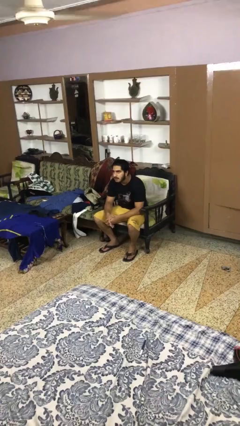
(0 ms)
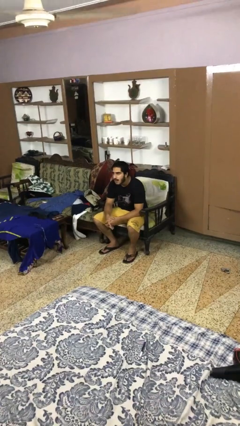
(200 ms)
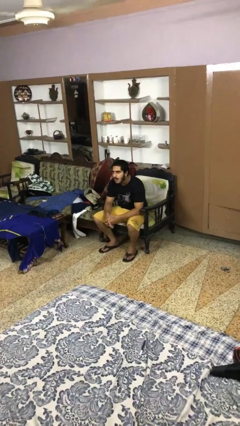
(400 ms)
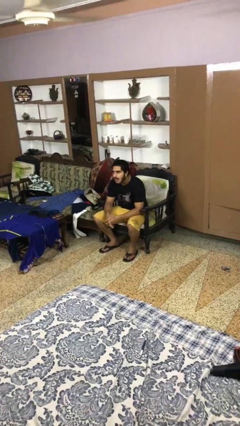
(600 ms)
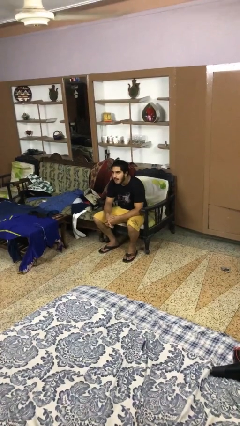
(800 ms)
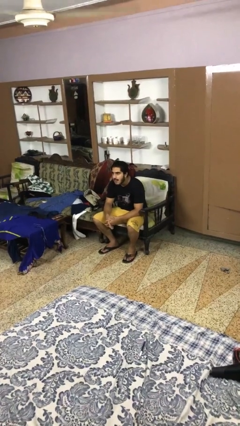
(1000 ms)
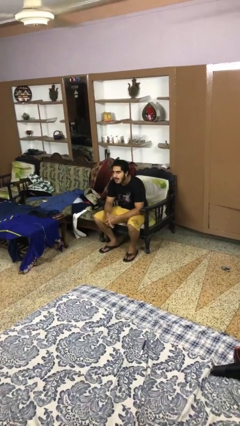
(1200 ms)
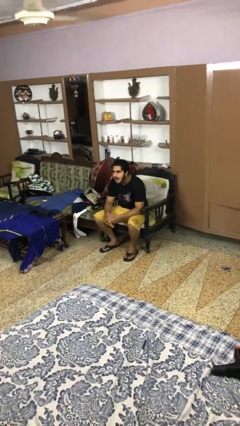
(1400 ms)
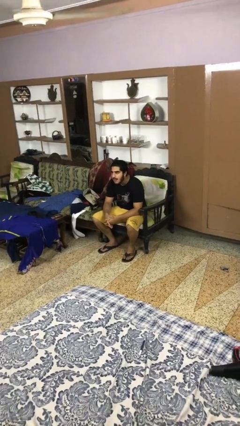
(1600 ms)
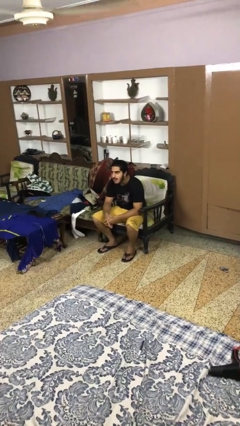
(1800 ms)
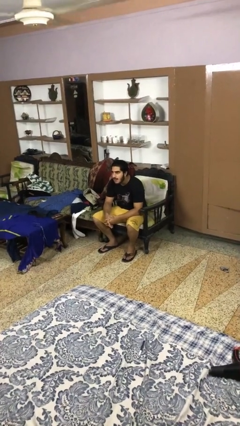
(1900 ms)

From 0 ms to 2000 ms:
person sticks out tongue

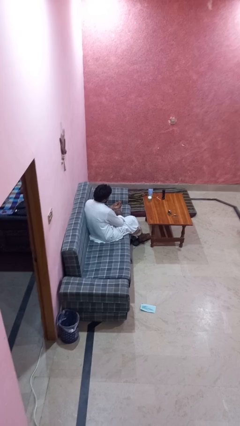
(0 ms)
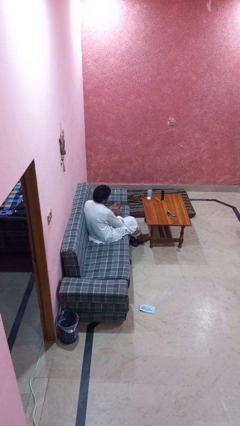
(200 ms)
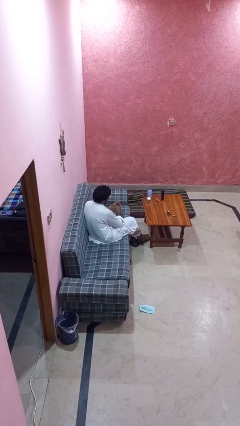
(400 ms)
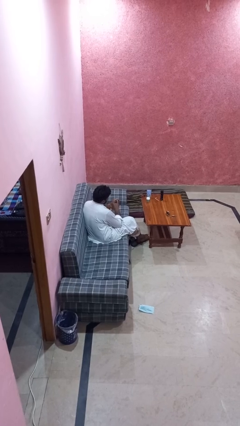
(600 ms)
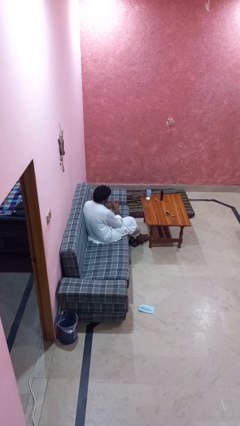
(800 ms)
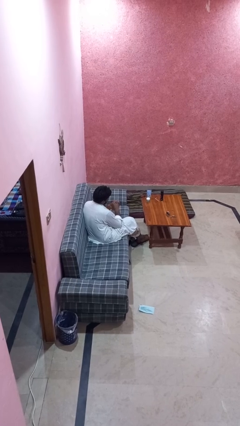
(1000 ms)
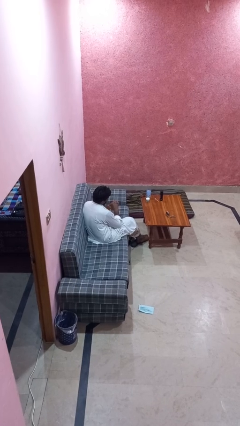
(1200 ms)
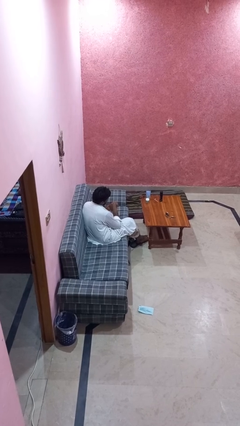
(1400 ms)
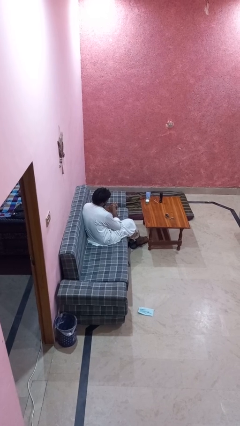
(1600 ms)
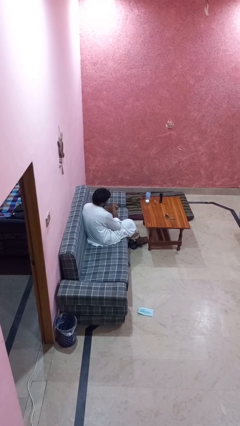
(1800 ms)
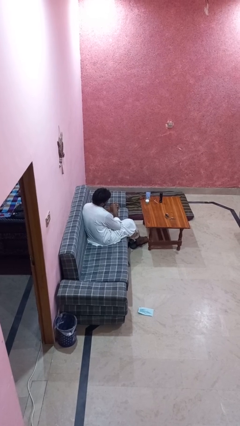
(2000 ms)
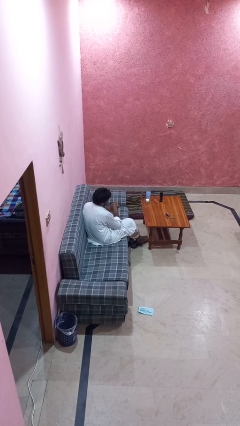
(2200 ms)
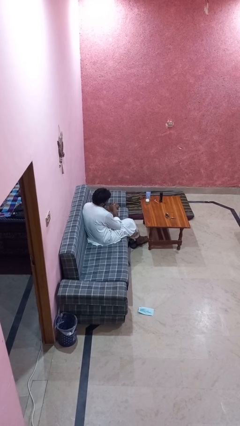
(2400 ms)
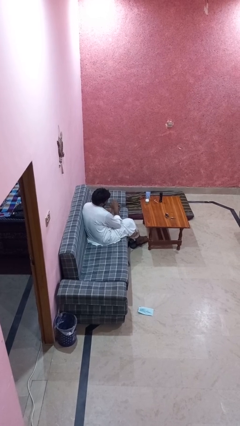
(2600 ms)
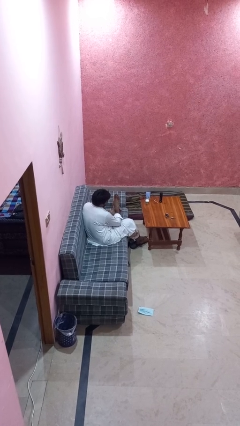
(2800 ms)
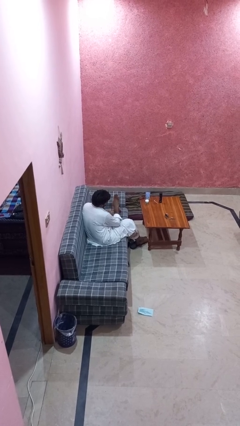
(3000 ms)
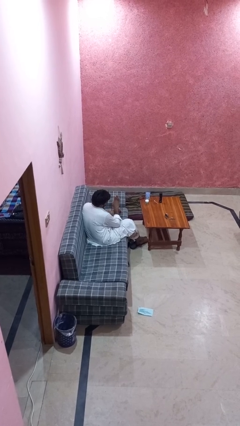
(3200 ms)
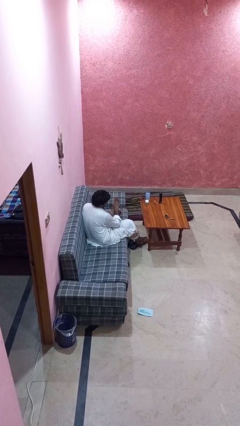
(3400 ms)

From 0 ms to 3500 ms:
person puts on ring

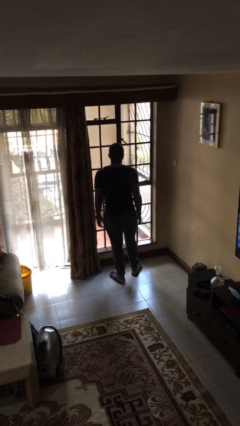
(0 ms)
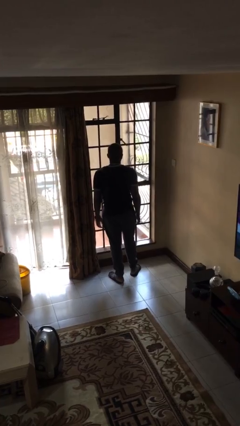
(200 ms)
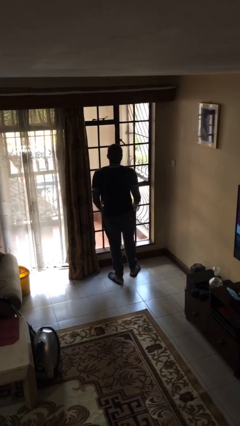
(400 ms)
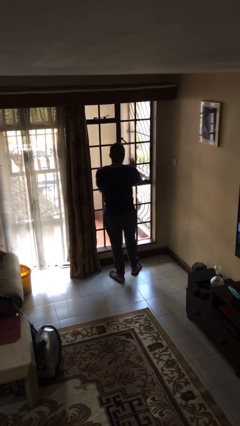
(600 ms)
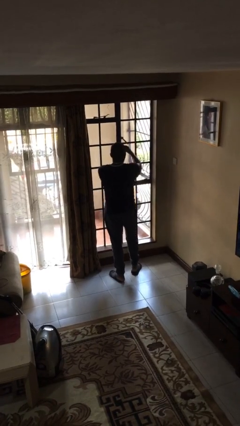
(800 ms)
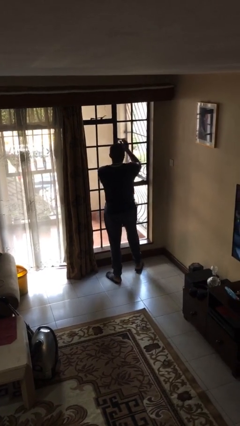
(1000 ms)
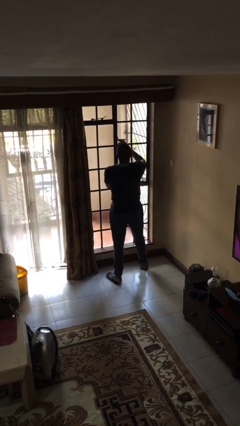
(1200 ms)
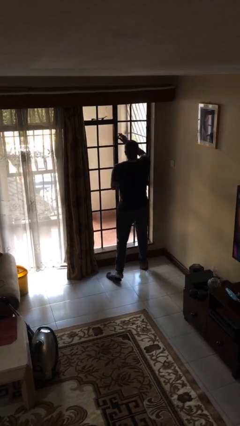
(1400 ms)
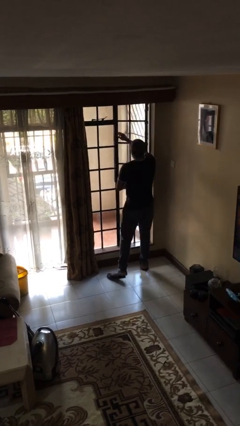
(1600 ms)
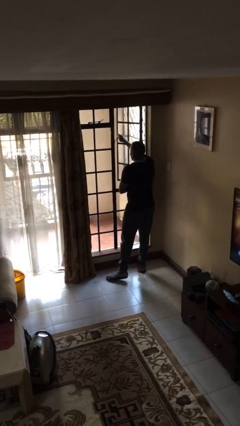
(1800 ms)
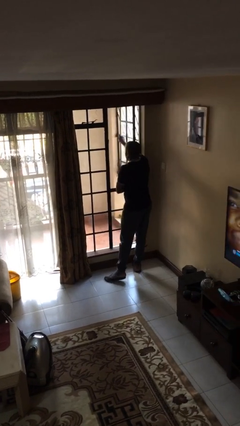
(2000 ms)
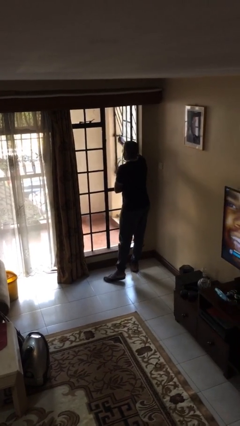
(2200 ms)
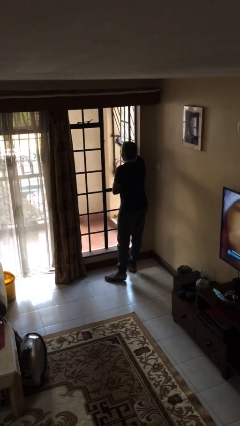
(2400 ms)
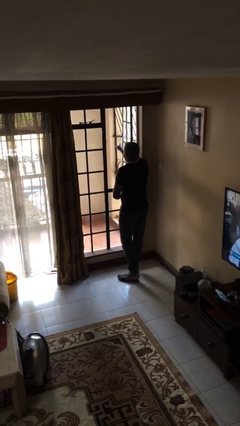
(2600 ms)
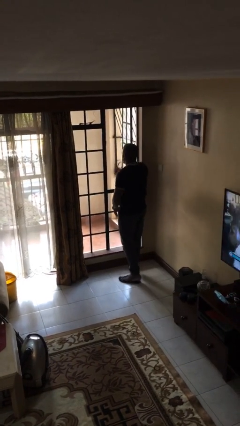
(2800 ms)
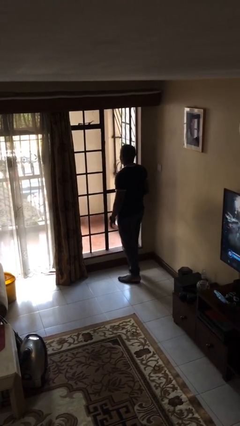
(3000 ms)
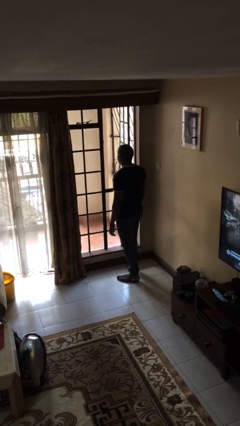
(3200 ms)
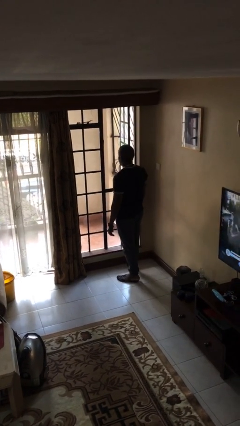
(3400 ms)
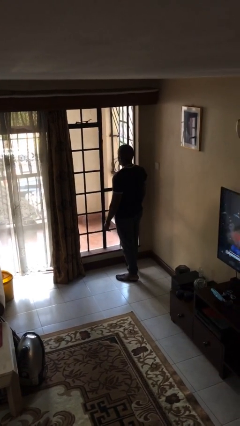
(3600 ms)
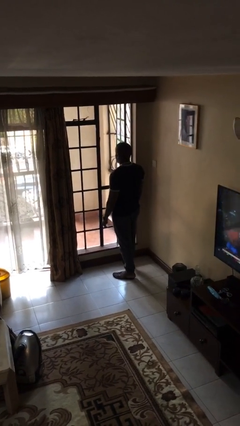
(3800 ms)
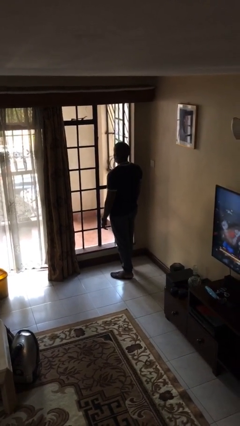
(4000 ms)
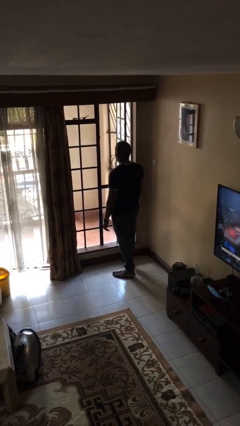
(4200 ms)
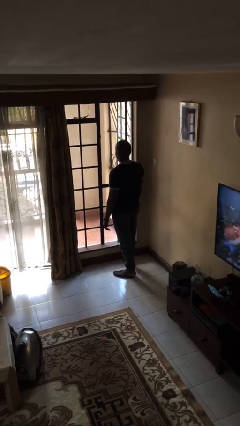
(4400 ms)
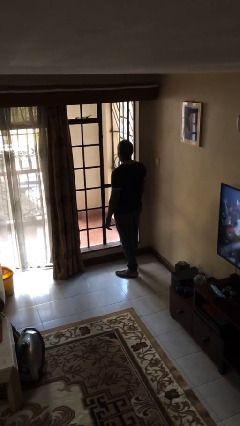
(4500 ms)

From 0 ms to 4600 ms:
person opens home window

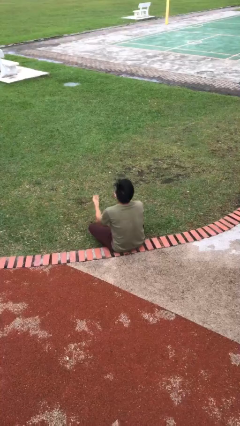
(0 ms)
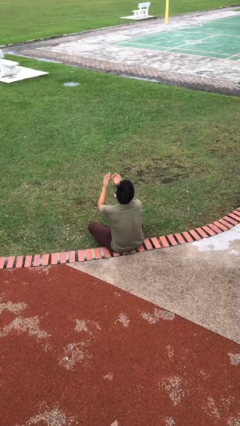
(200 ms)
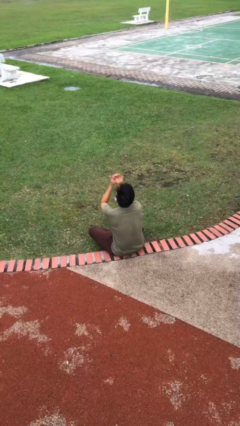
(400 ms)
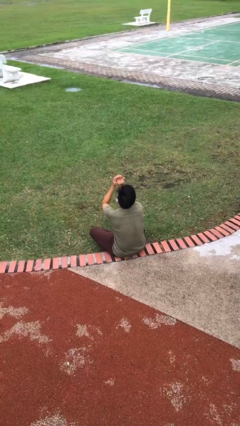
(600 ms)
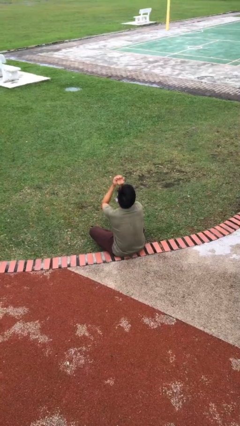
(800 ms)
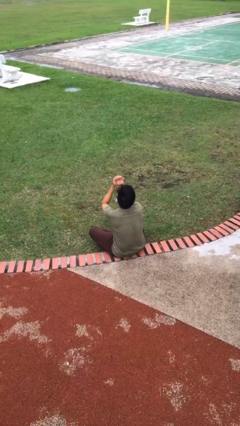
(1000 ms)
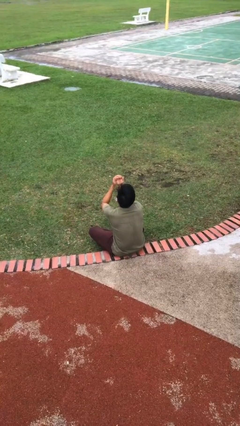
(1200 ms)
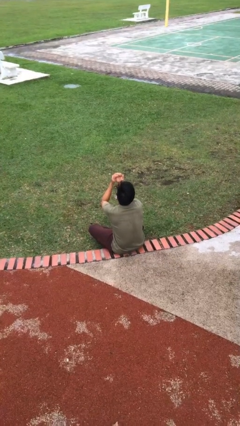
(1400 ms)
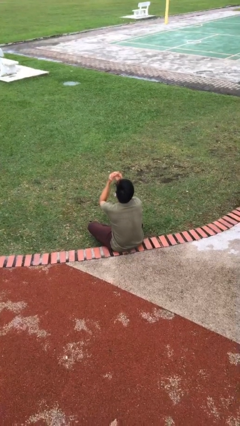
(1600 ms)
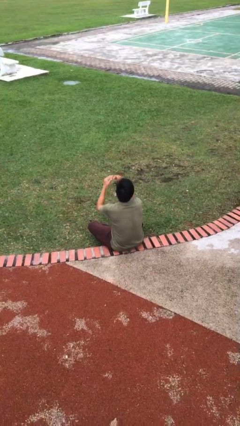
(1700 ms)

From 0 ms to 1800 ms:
person prays

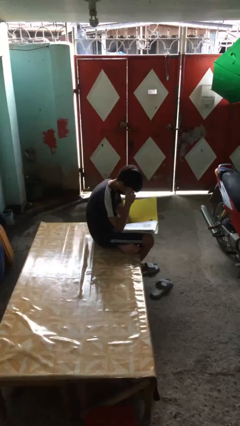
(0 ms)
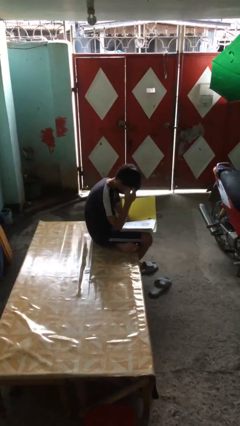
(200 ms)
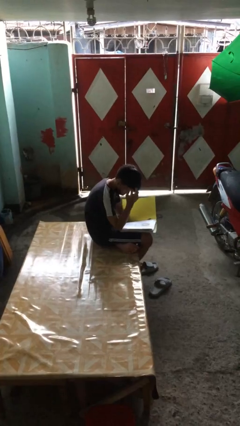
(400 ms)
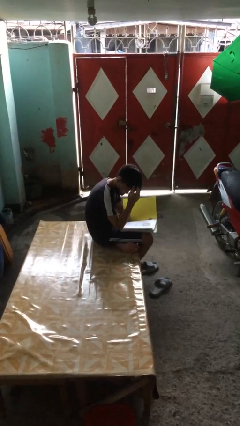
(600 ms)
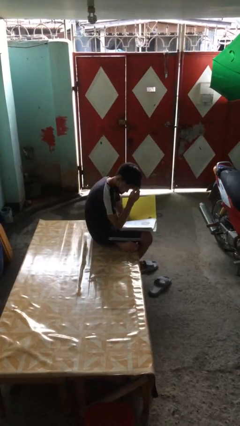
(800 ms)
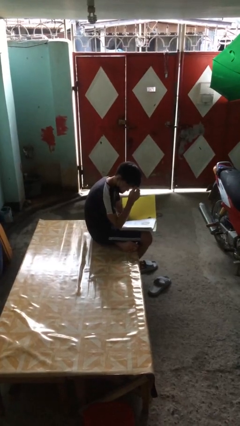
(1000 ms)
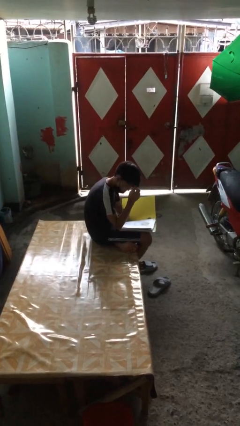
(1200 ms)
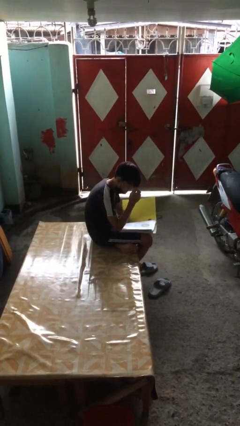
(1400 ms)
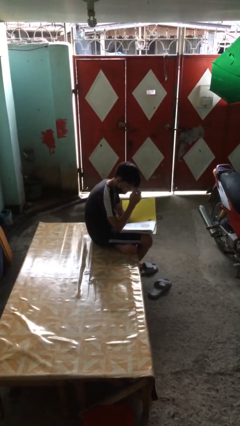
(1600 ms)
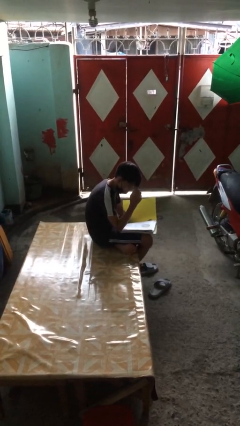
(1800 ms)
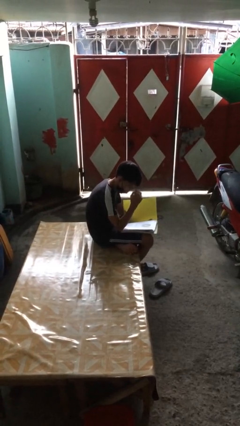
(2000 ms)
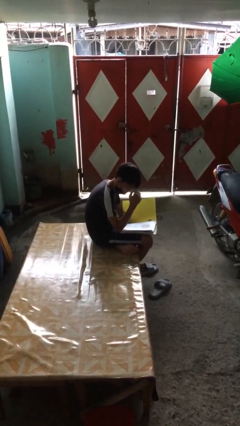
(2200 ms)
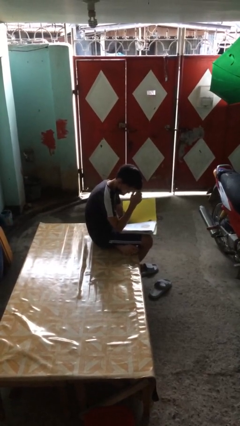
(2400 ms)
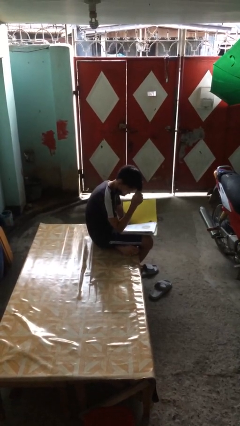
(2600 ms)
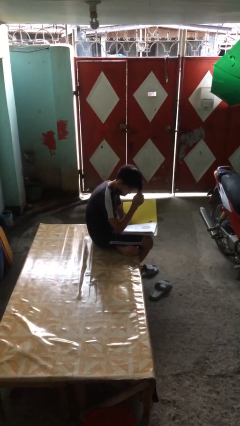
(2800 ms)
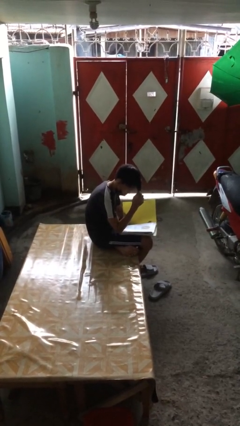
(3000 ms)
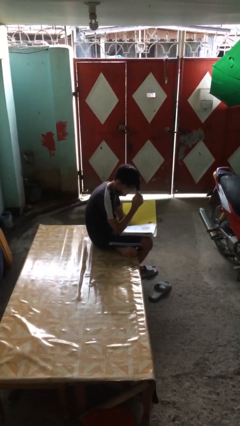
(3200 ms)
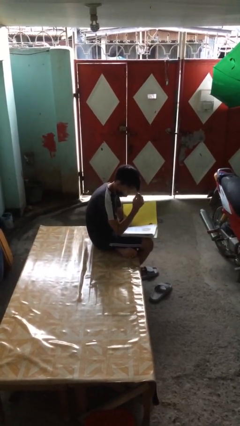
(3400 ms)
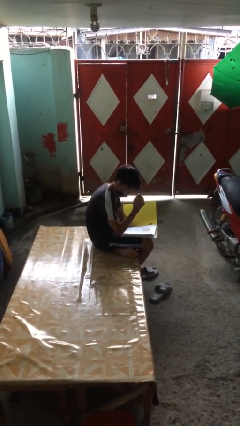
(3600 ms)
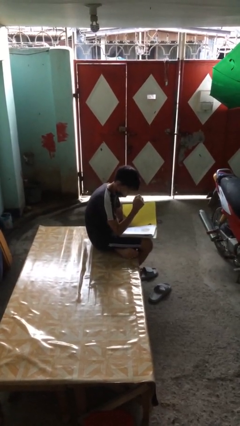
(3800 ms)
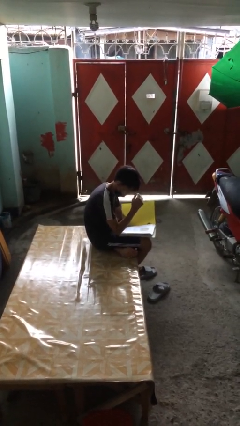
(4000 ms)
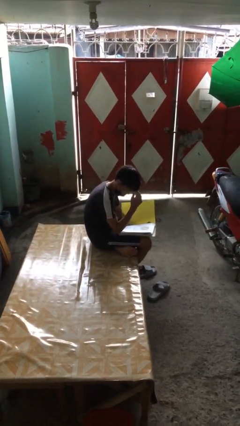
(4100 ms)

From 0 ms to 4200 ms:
person reads document

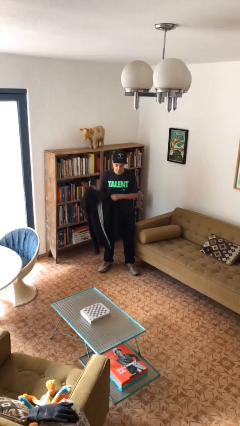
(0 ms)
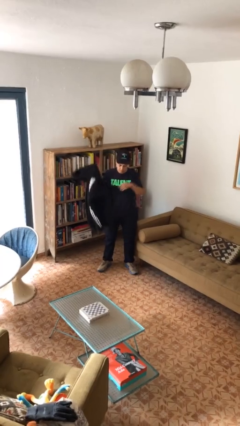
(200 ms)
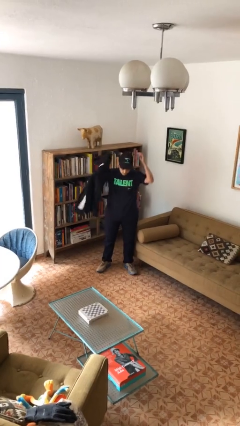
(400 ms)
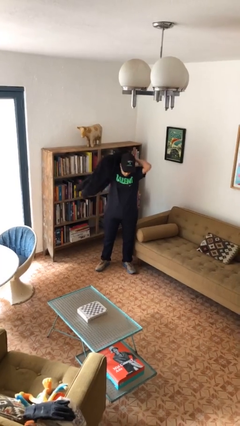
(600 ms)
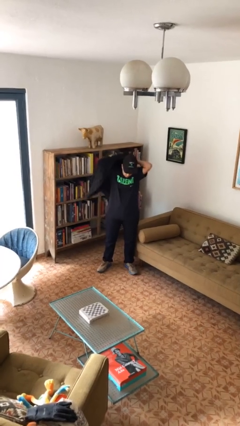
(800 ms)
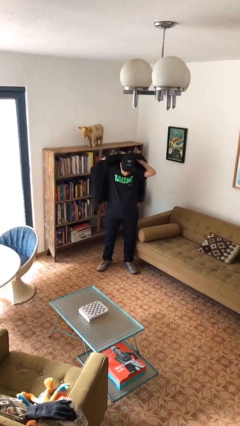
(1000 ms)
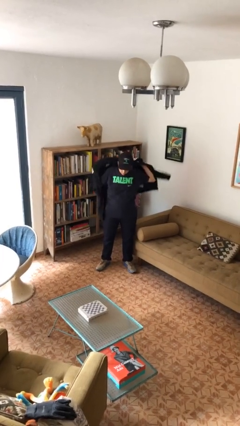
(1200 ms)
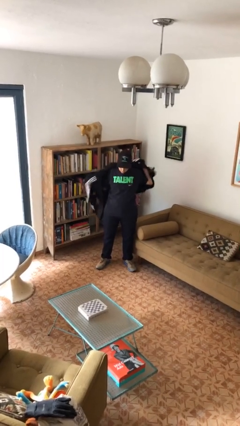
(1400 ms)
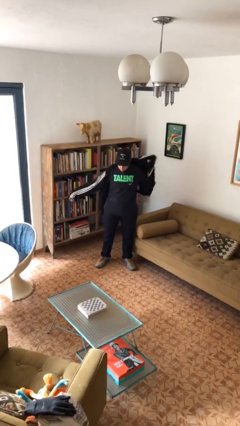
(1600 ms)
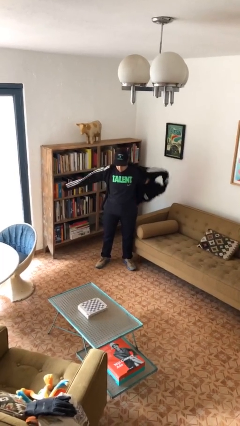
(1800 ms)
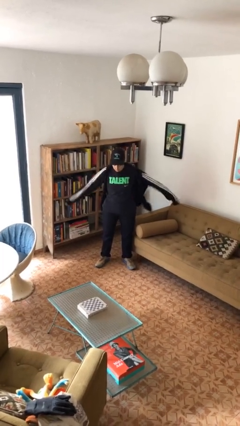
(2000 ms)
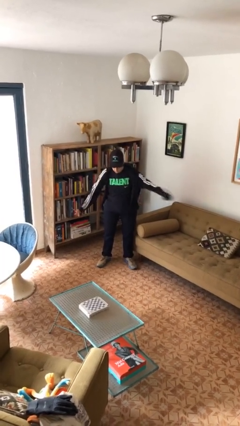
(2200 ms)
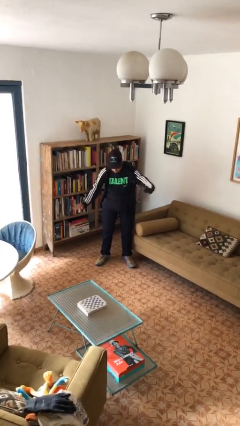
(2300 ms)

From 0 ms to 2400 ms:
person puts on jacket
